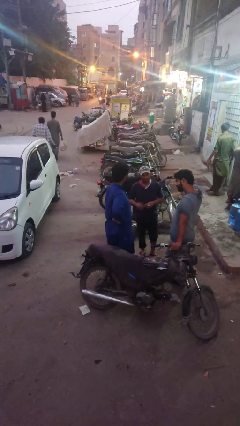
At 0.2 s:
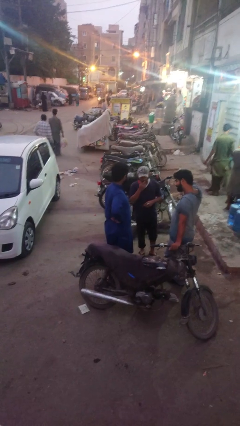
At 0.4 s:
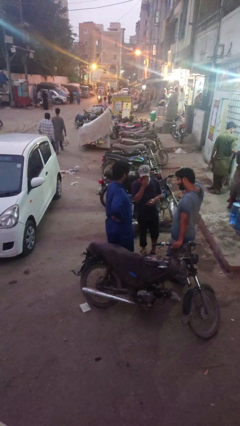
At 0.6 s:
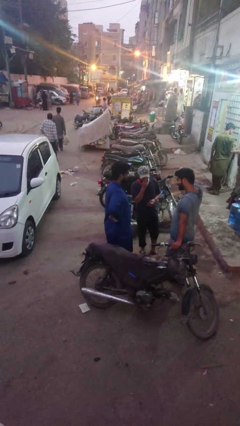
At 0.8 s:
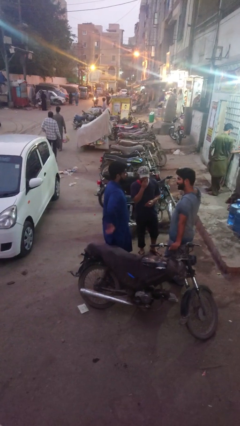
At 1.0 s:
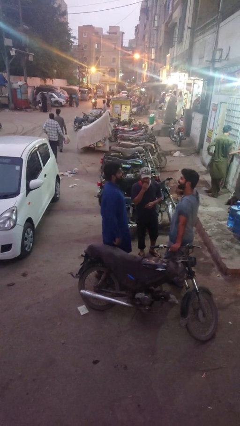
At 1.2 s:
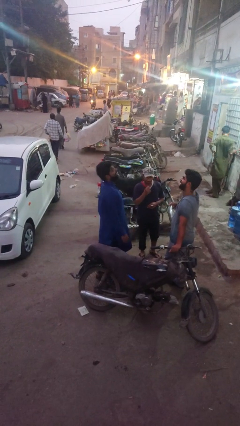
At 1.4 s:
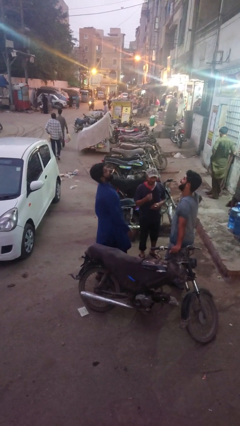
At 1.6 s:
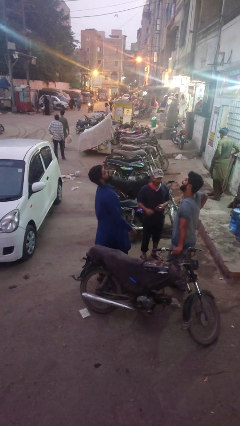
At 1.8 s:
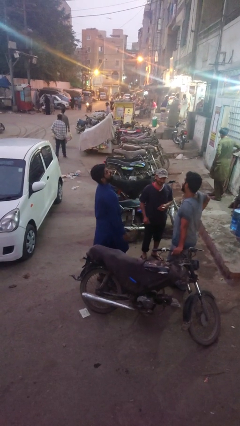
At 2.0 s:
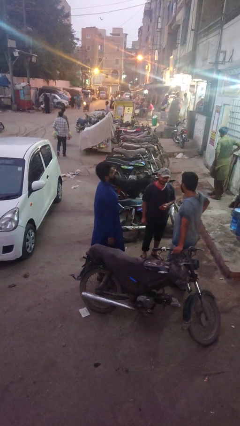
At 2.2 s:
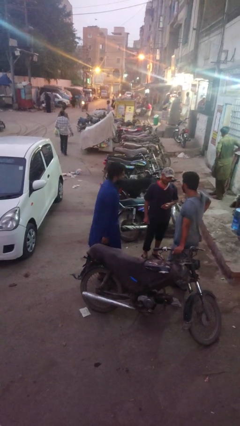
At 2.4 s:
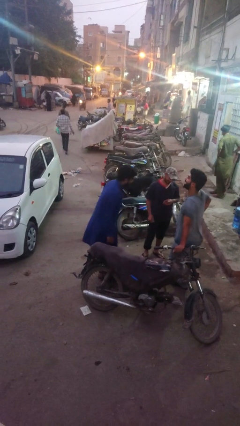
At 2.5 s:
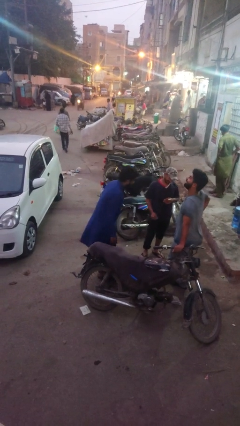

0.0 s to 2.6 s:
person laughs with person

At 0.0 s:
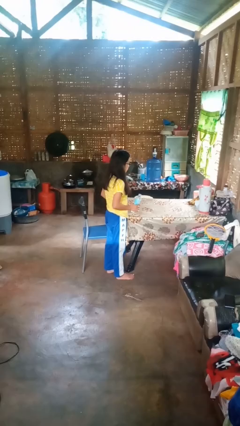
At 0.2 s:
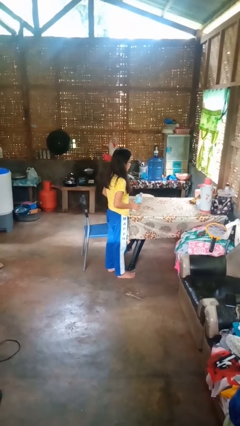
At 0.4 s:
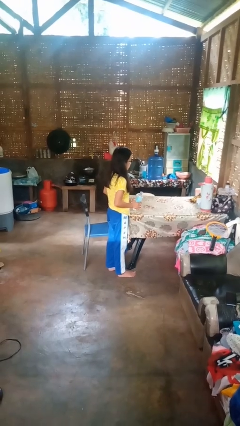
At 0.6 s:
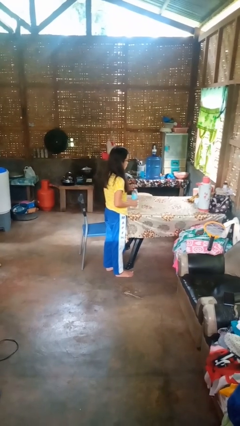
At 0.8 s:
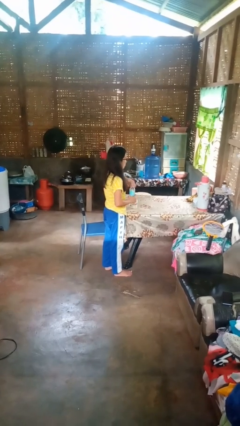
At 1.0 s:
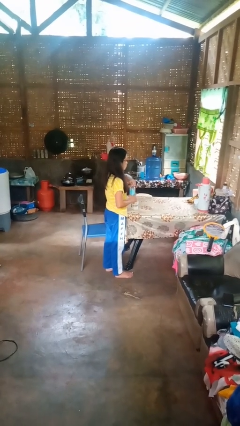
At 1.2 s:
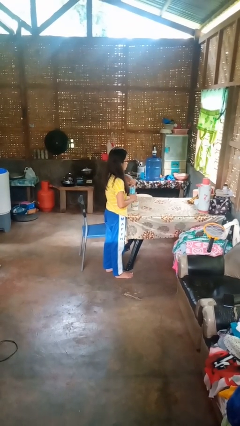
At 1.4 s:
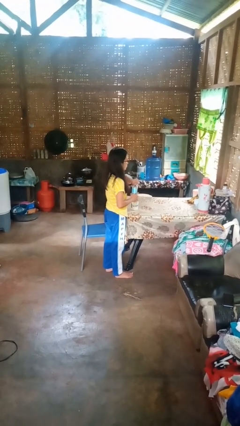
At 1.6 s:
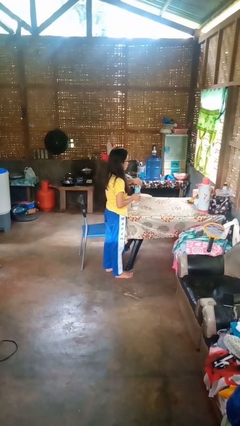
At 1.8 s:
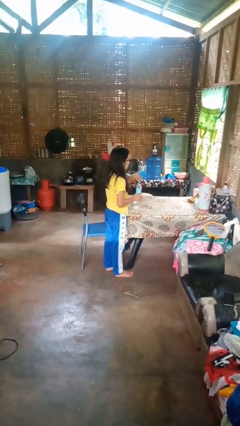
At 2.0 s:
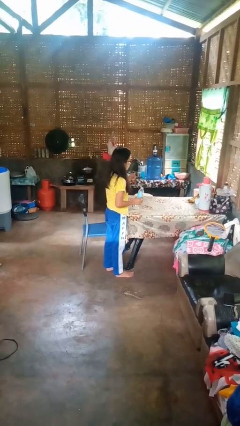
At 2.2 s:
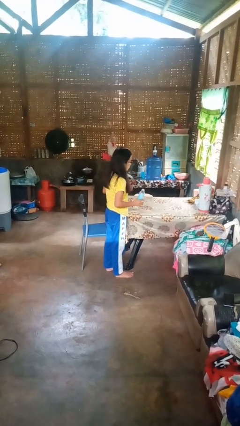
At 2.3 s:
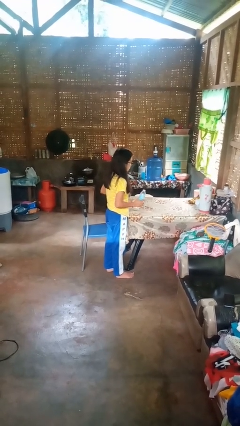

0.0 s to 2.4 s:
person unscrews lid from bottle

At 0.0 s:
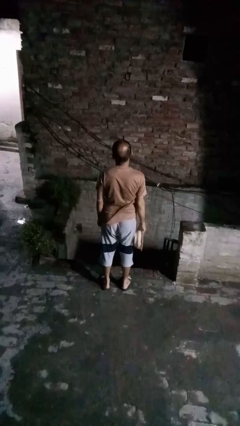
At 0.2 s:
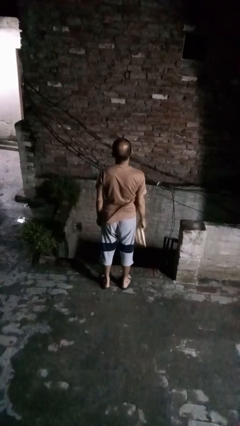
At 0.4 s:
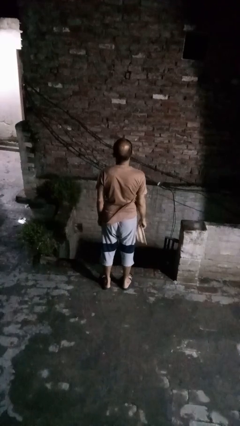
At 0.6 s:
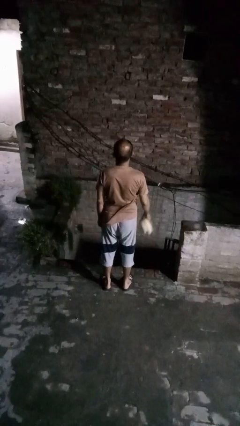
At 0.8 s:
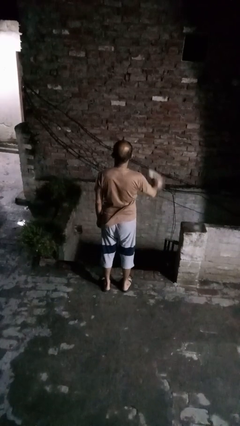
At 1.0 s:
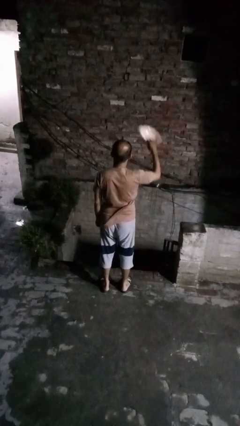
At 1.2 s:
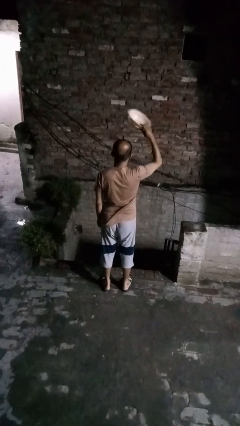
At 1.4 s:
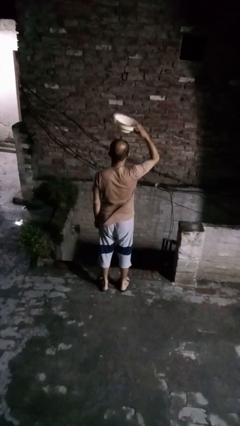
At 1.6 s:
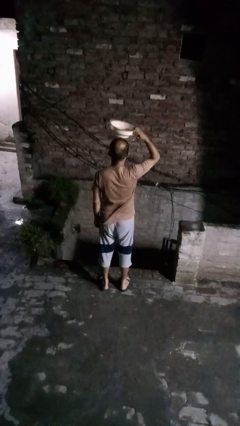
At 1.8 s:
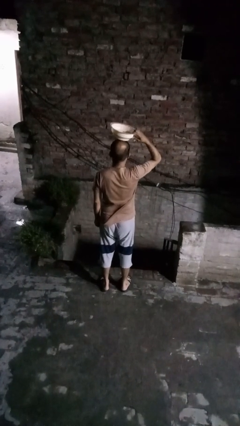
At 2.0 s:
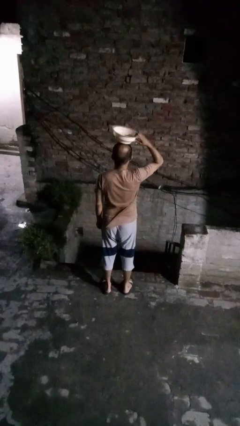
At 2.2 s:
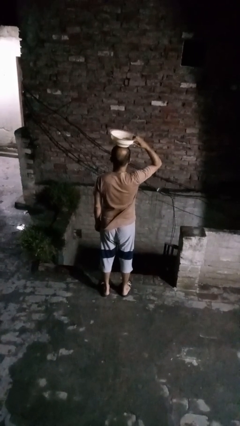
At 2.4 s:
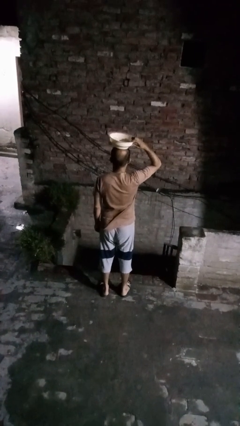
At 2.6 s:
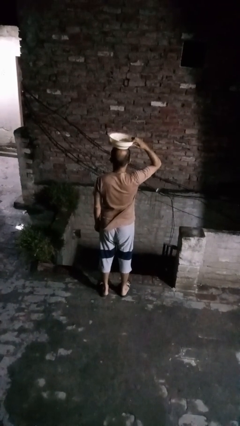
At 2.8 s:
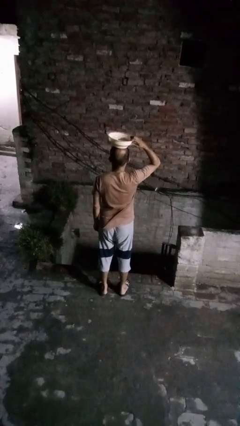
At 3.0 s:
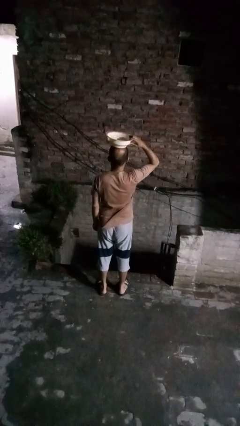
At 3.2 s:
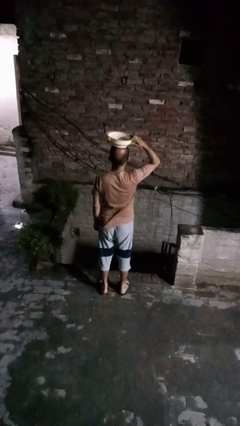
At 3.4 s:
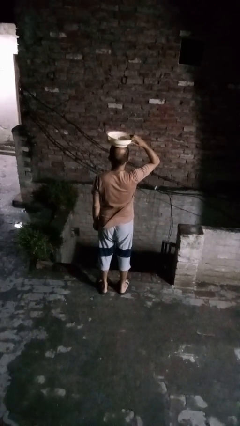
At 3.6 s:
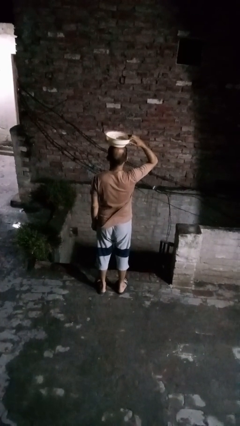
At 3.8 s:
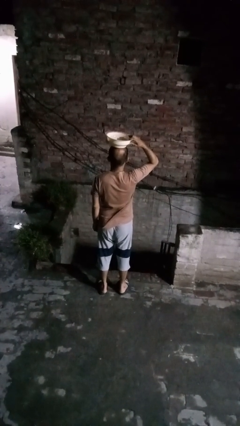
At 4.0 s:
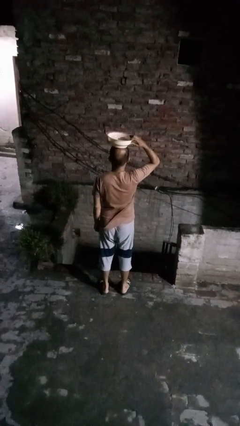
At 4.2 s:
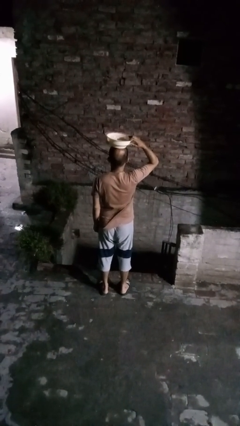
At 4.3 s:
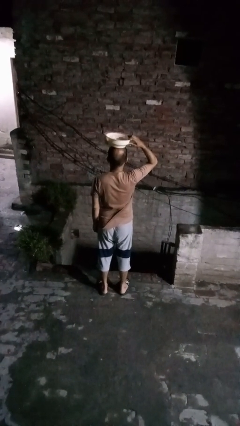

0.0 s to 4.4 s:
person holds object above head

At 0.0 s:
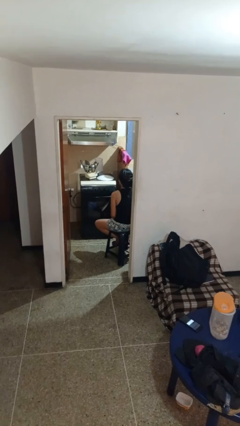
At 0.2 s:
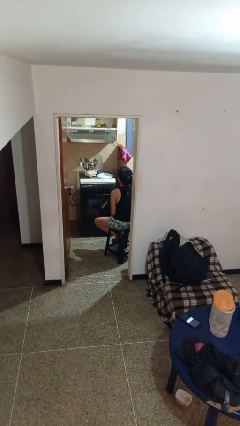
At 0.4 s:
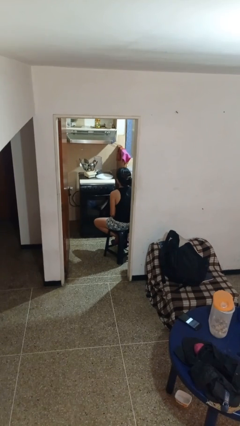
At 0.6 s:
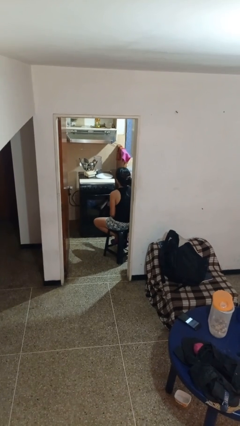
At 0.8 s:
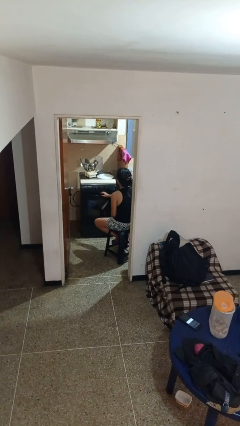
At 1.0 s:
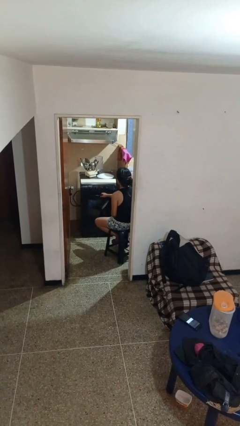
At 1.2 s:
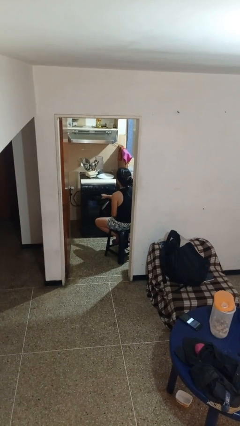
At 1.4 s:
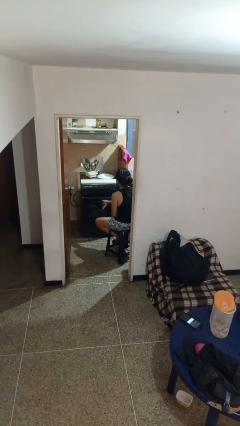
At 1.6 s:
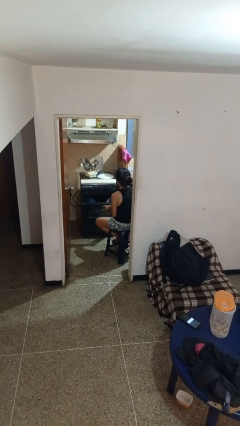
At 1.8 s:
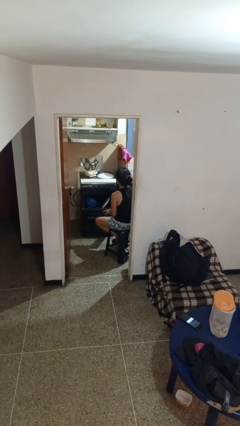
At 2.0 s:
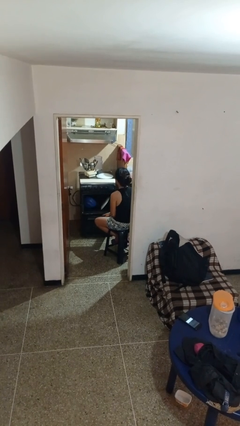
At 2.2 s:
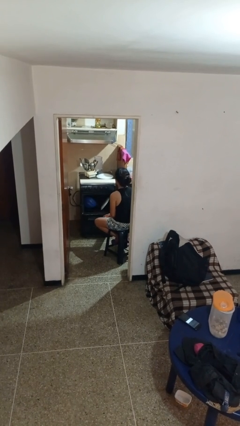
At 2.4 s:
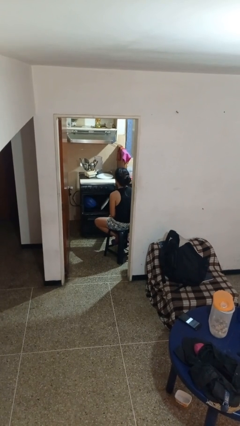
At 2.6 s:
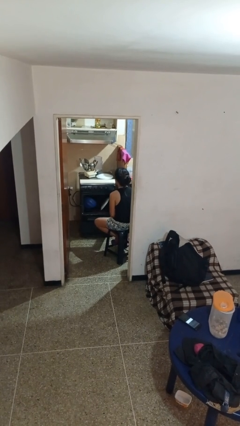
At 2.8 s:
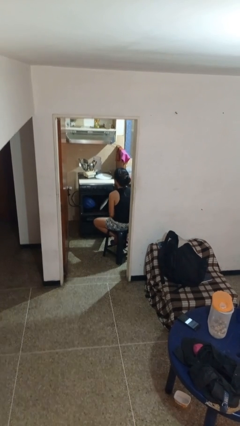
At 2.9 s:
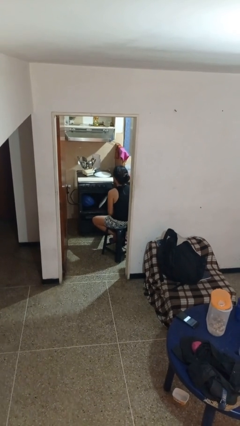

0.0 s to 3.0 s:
person opens dishwasher

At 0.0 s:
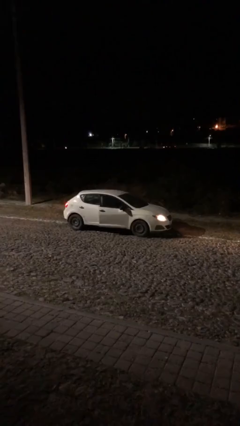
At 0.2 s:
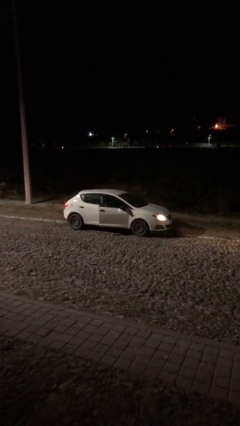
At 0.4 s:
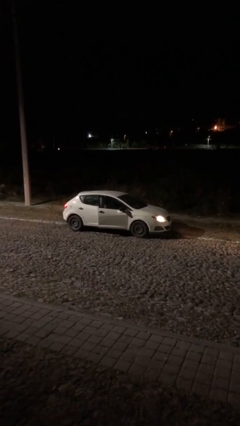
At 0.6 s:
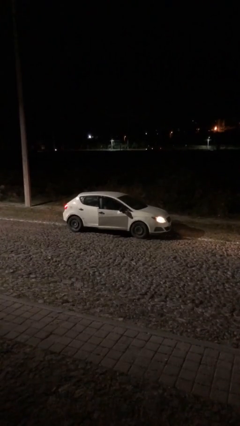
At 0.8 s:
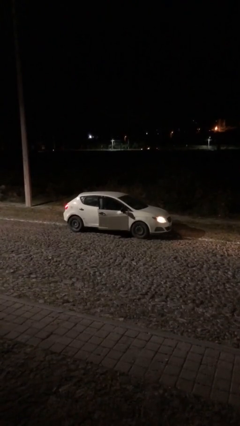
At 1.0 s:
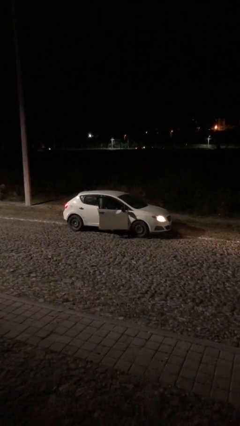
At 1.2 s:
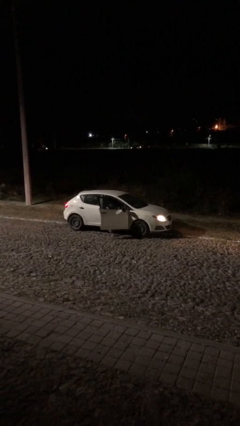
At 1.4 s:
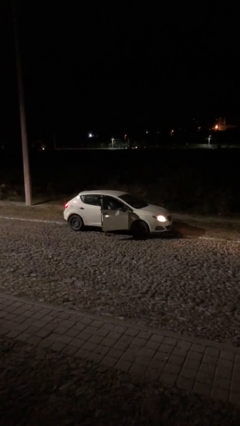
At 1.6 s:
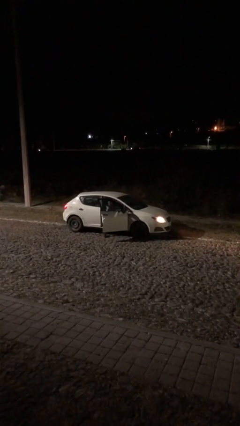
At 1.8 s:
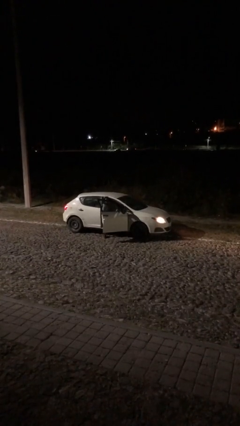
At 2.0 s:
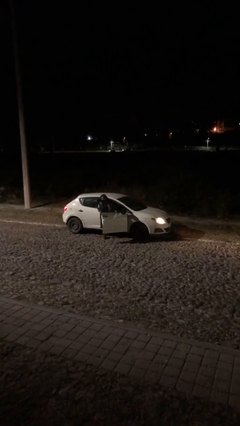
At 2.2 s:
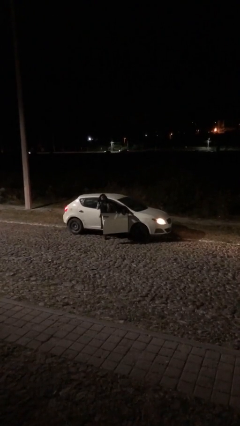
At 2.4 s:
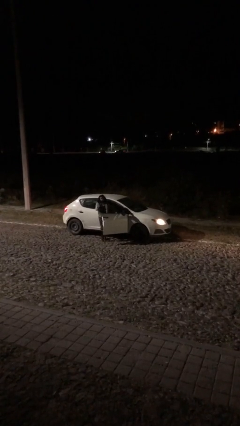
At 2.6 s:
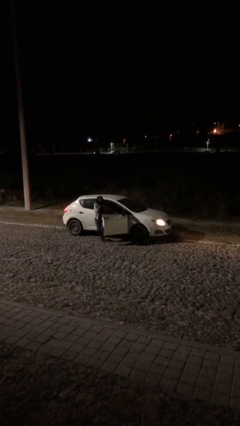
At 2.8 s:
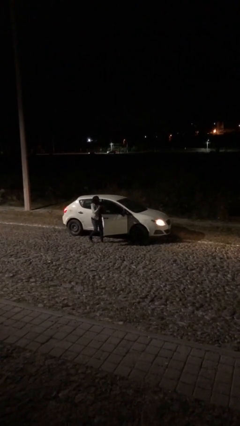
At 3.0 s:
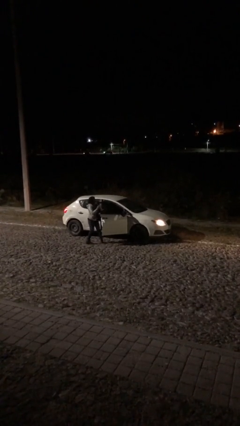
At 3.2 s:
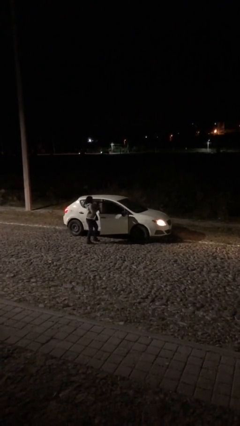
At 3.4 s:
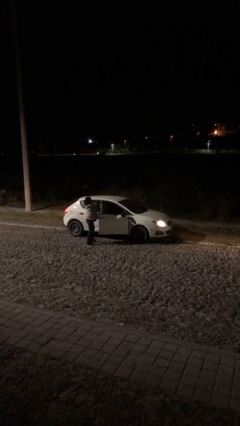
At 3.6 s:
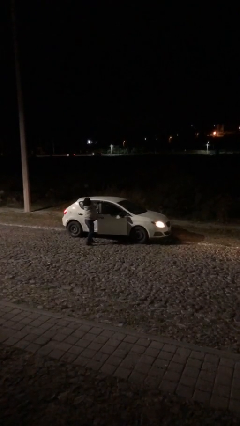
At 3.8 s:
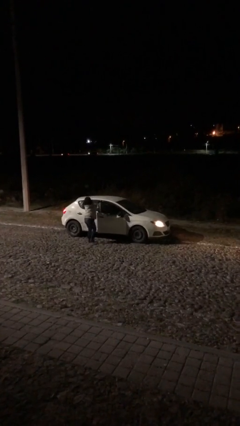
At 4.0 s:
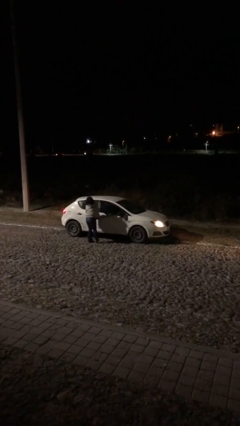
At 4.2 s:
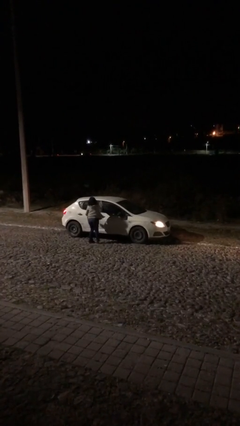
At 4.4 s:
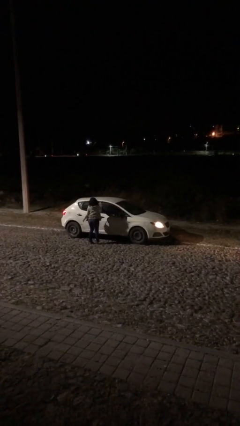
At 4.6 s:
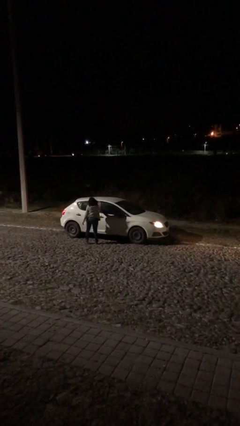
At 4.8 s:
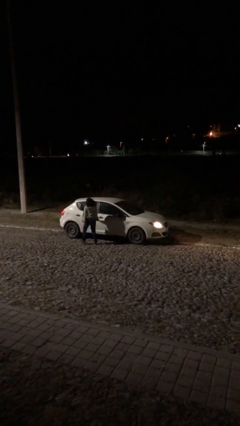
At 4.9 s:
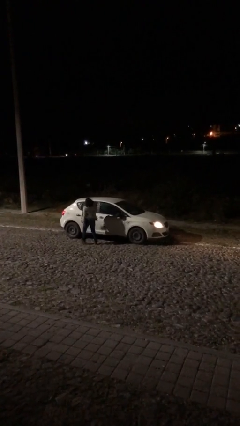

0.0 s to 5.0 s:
car drops off person
